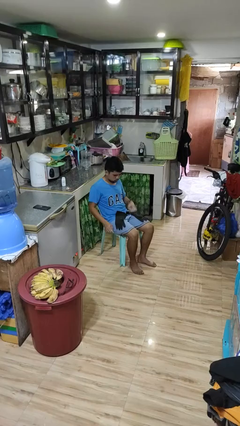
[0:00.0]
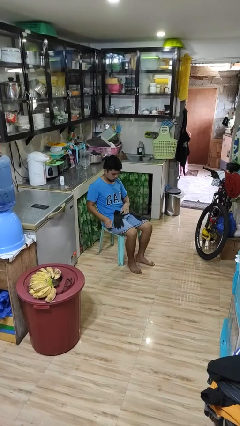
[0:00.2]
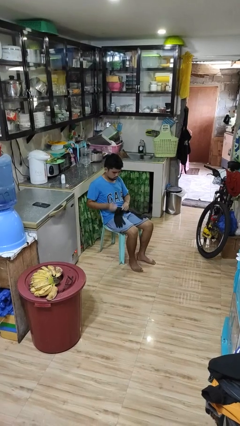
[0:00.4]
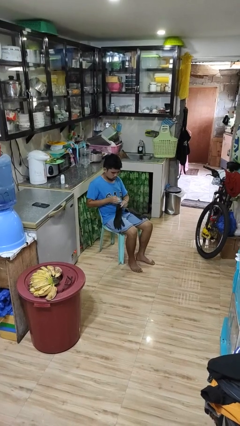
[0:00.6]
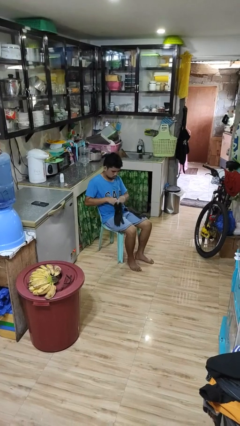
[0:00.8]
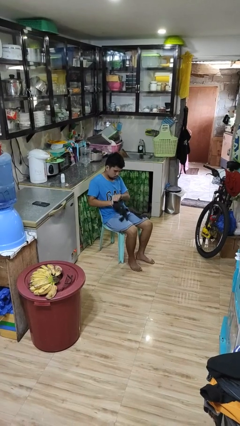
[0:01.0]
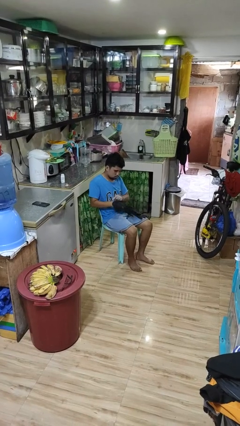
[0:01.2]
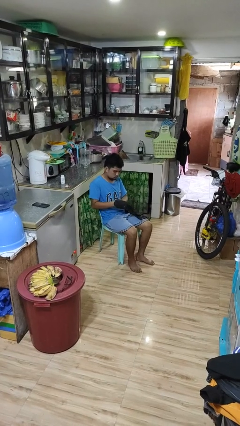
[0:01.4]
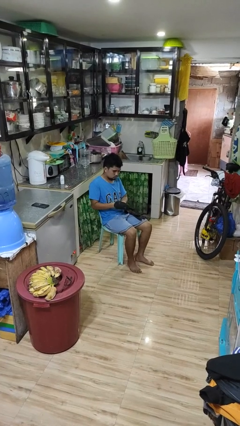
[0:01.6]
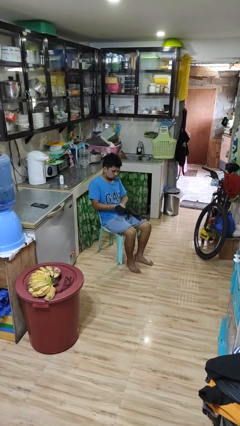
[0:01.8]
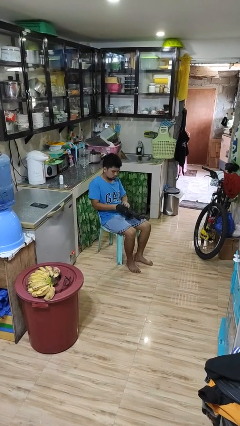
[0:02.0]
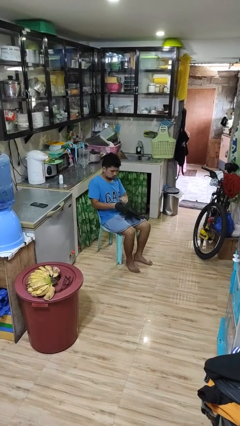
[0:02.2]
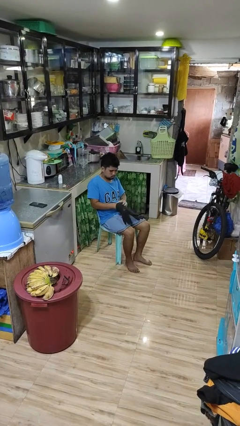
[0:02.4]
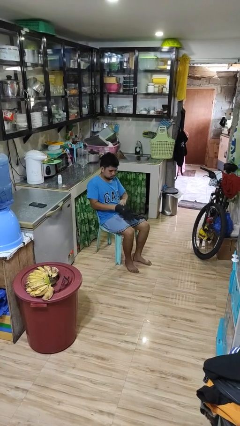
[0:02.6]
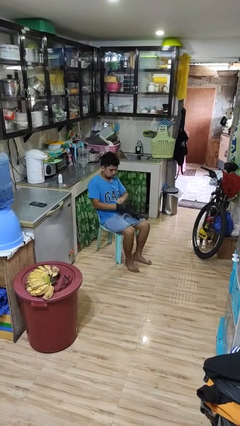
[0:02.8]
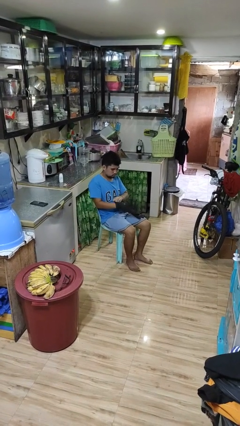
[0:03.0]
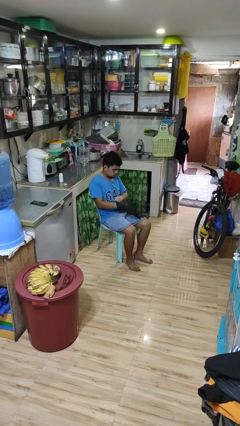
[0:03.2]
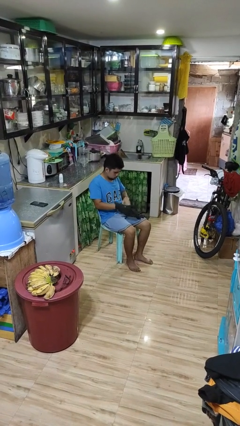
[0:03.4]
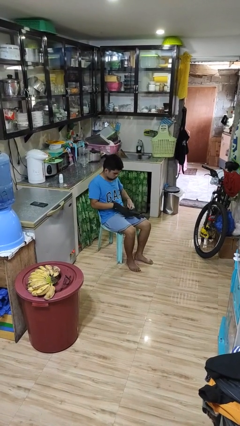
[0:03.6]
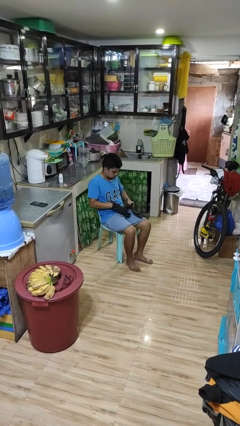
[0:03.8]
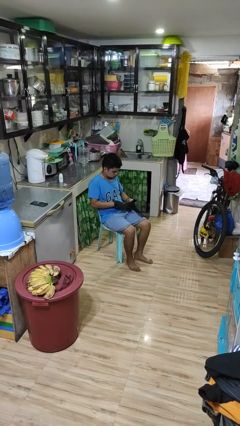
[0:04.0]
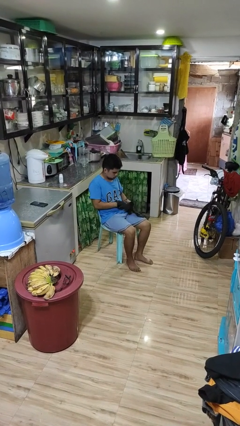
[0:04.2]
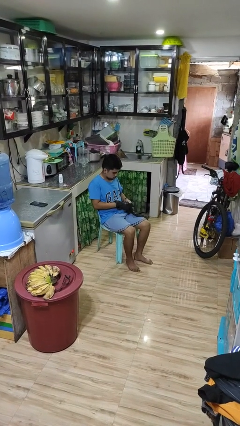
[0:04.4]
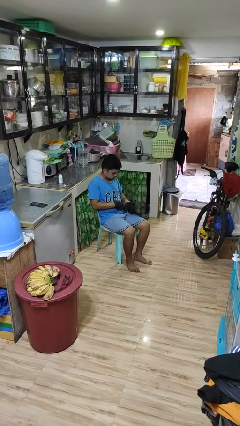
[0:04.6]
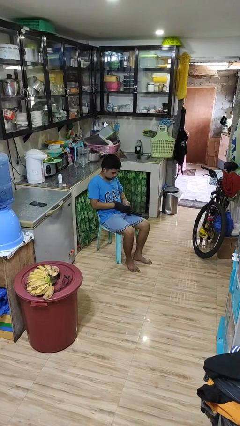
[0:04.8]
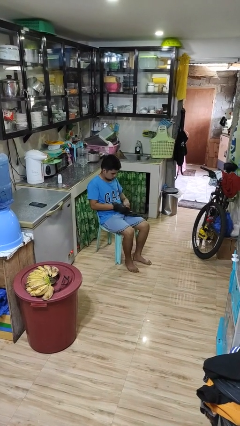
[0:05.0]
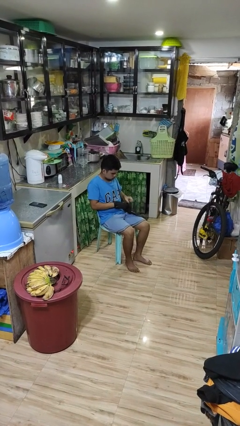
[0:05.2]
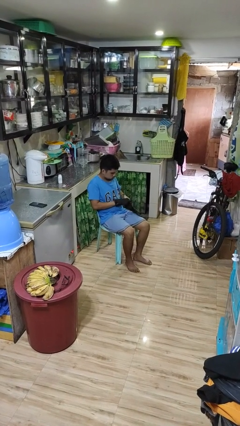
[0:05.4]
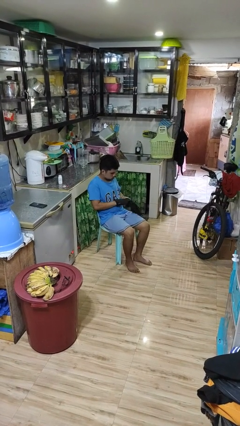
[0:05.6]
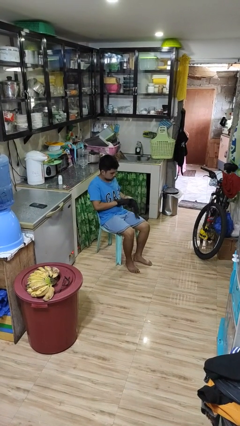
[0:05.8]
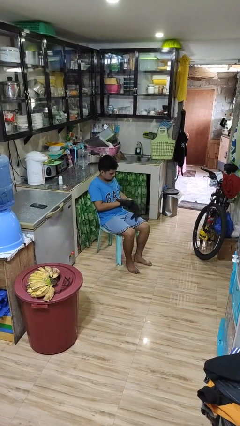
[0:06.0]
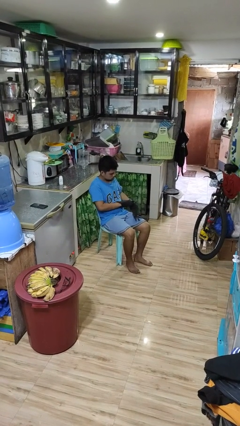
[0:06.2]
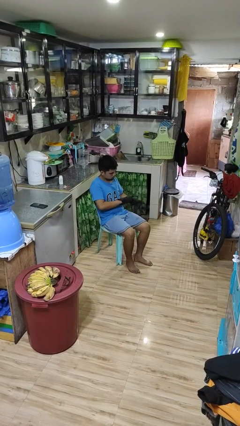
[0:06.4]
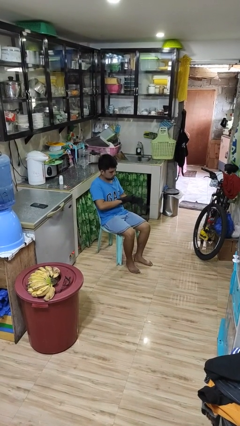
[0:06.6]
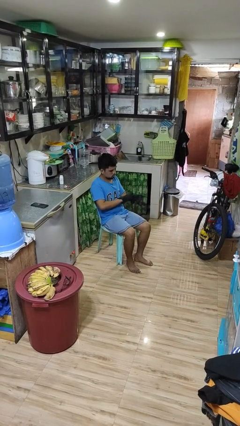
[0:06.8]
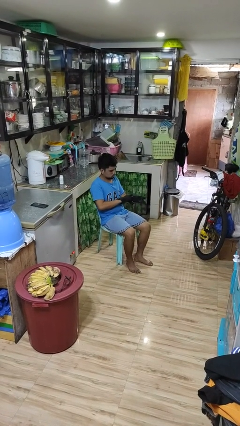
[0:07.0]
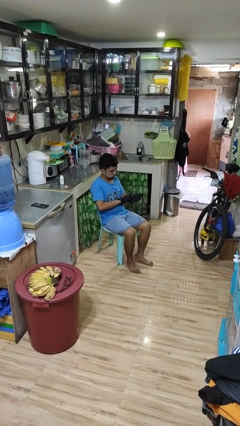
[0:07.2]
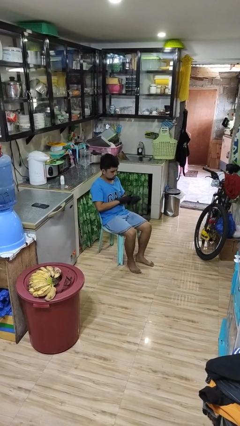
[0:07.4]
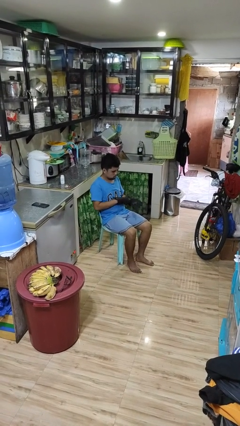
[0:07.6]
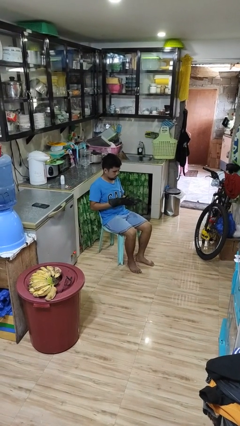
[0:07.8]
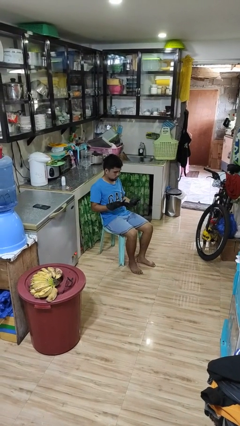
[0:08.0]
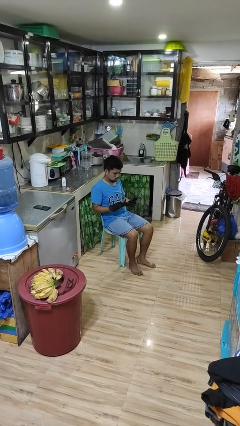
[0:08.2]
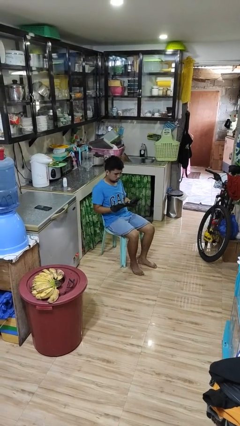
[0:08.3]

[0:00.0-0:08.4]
person puts on gloves

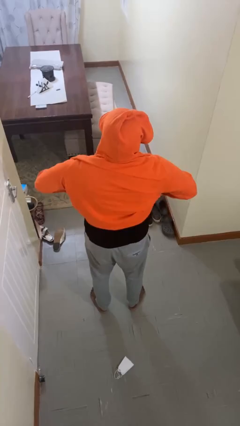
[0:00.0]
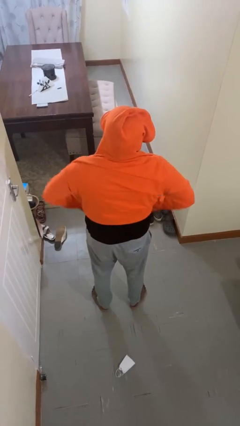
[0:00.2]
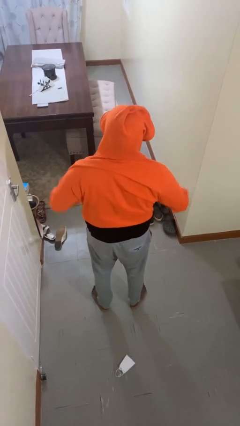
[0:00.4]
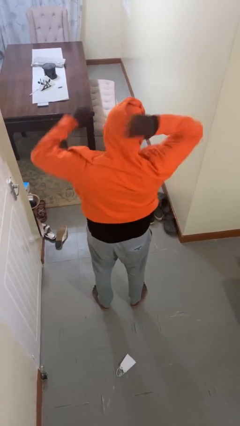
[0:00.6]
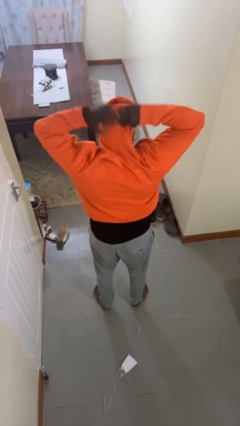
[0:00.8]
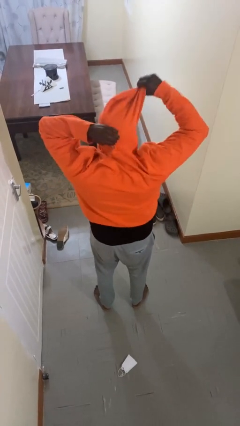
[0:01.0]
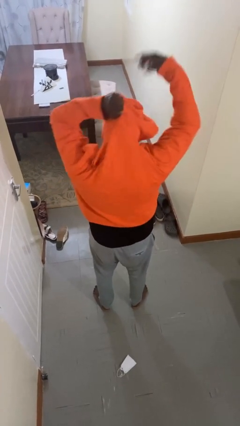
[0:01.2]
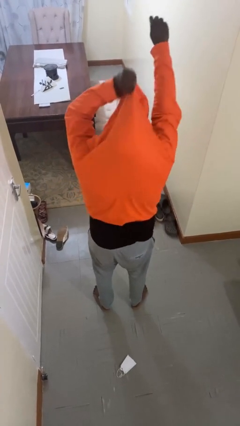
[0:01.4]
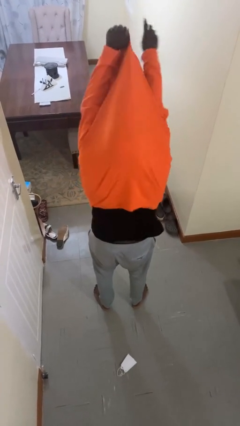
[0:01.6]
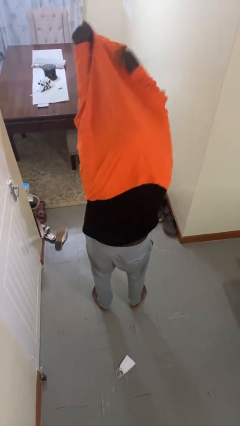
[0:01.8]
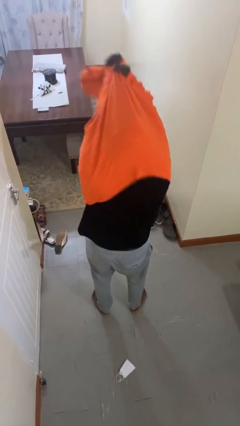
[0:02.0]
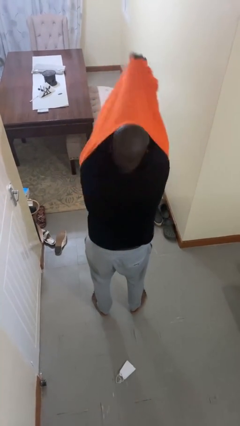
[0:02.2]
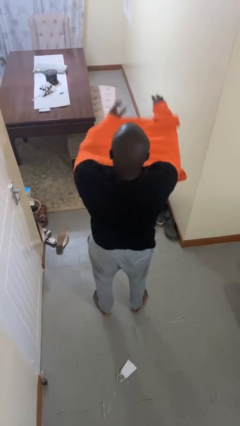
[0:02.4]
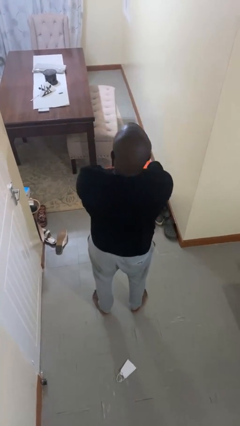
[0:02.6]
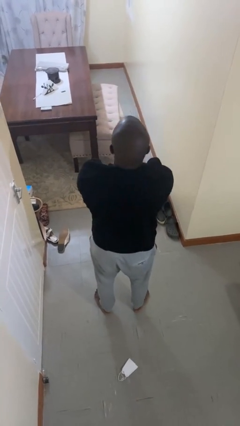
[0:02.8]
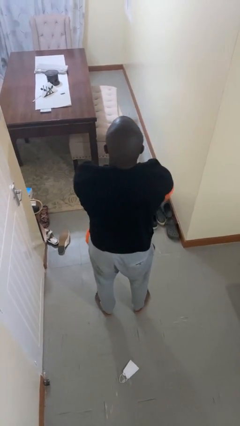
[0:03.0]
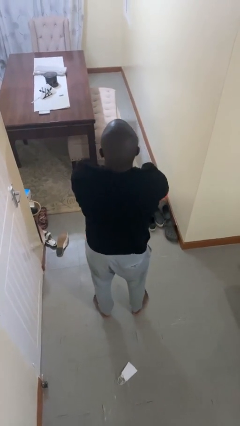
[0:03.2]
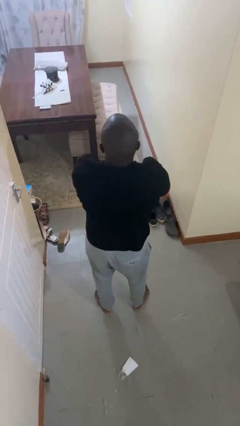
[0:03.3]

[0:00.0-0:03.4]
person takes off hoodie

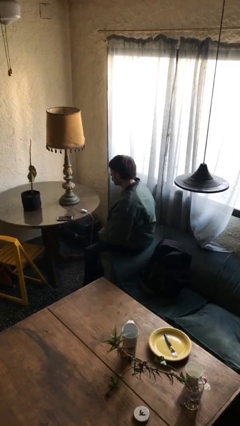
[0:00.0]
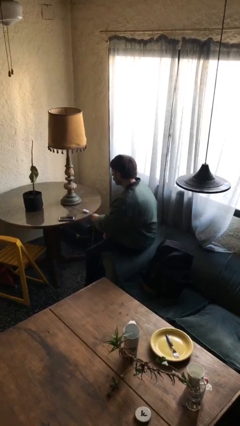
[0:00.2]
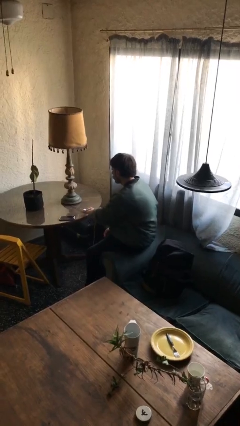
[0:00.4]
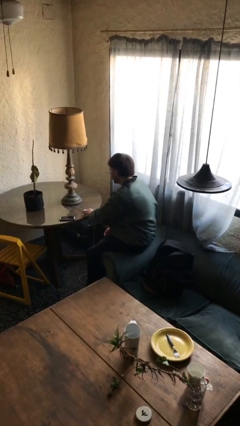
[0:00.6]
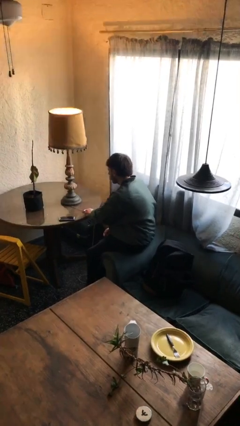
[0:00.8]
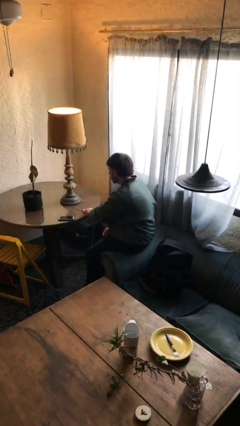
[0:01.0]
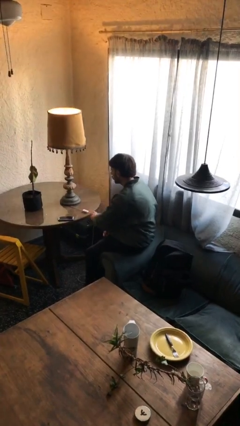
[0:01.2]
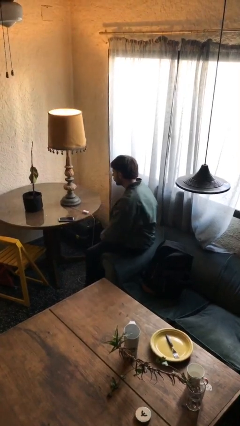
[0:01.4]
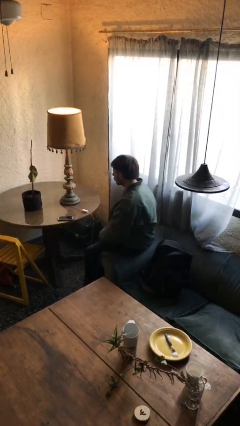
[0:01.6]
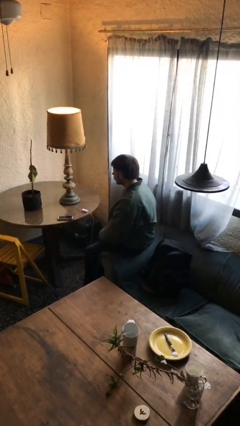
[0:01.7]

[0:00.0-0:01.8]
person turns on lamp

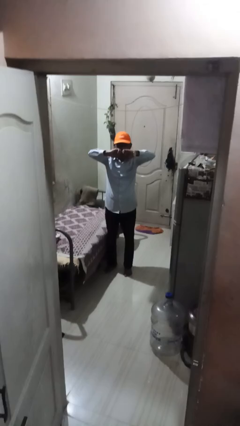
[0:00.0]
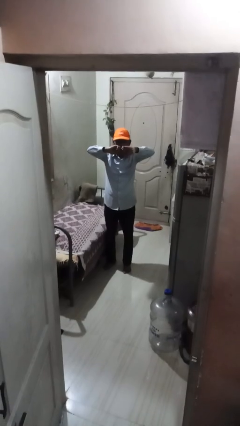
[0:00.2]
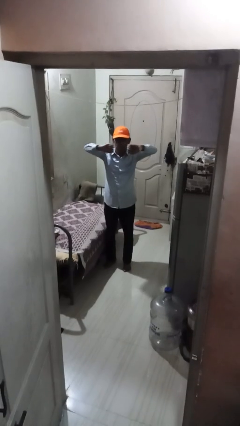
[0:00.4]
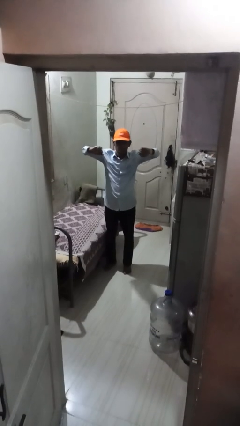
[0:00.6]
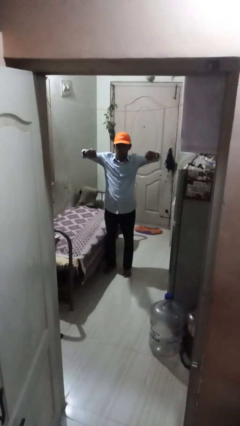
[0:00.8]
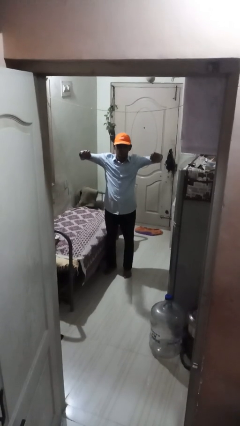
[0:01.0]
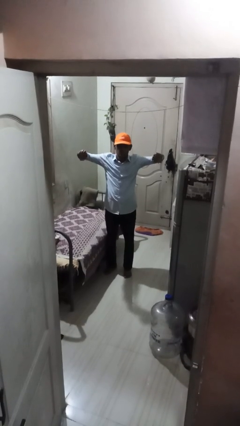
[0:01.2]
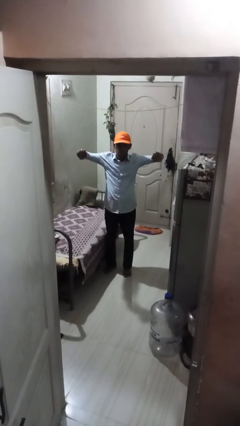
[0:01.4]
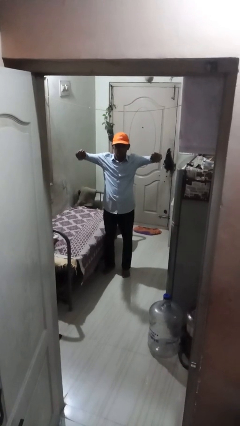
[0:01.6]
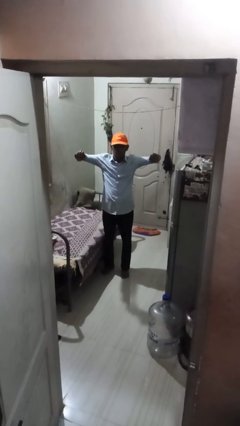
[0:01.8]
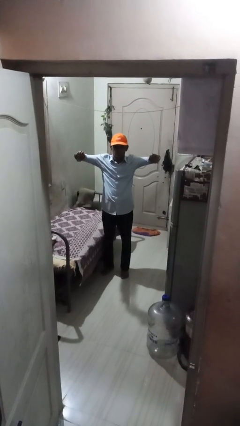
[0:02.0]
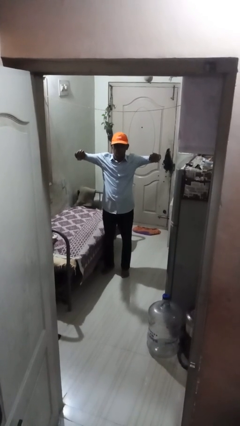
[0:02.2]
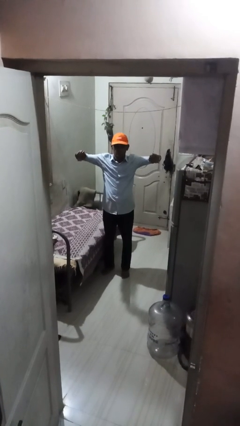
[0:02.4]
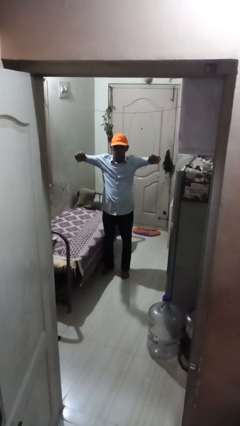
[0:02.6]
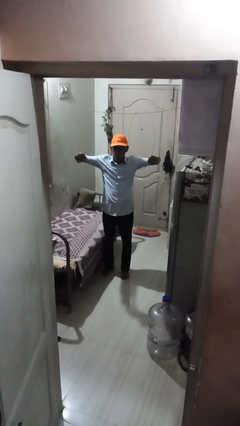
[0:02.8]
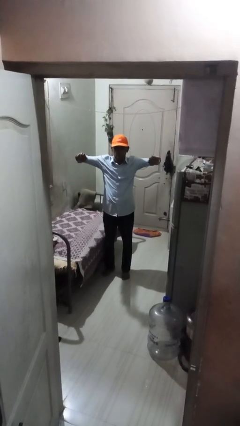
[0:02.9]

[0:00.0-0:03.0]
person gestures zoom out

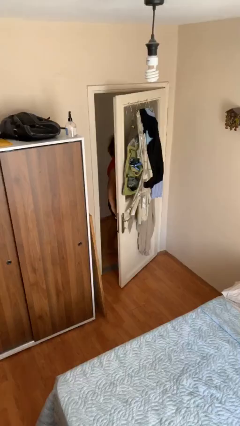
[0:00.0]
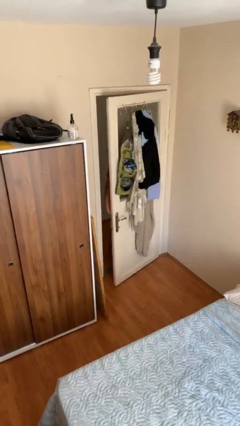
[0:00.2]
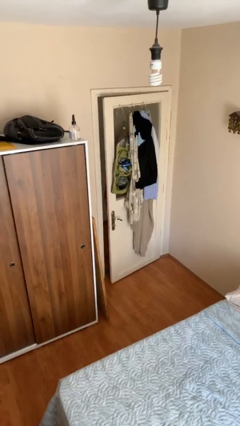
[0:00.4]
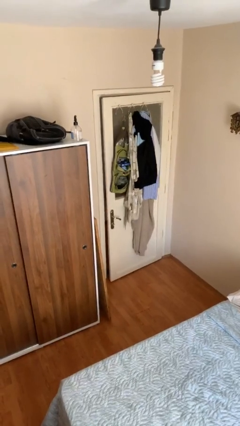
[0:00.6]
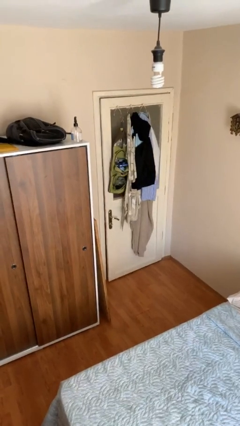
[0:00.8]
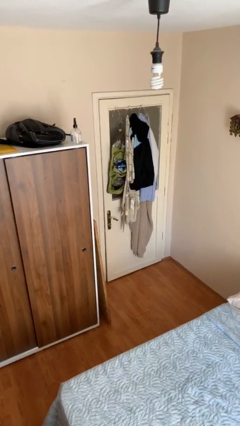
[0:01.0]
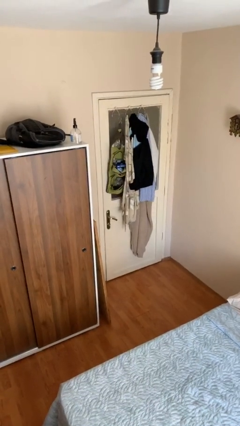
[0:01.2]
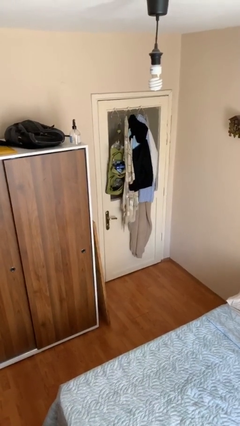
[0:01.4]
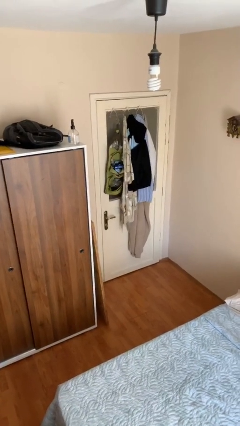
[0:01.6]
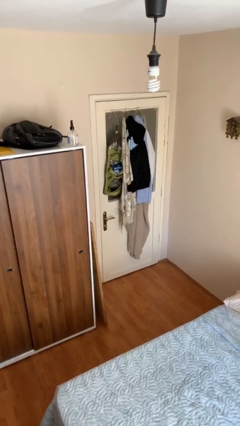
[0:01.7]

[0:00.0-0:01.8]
person closes facility door
